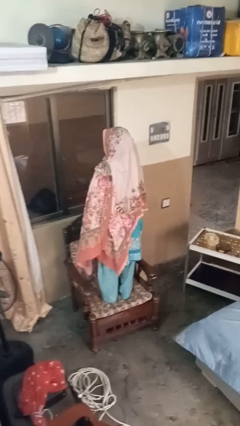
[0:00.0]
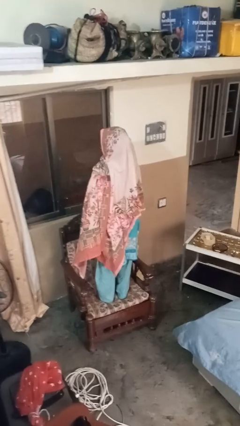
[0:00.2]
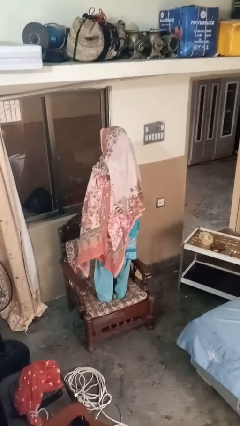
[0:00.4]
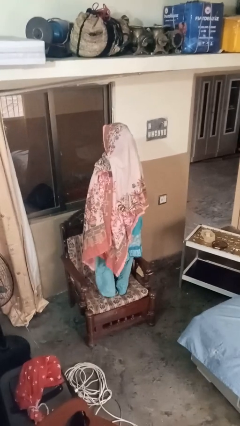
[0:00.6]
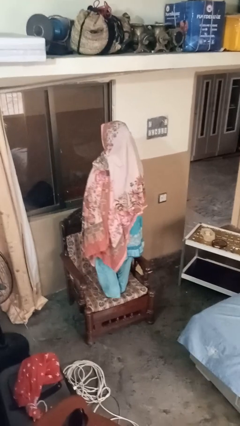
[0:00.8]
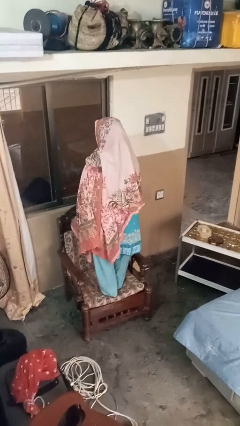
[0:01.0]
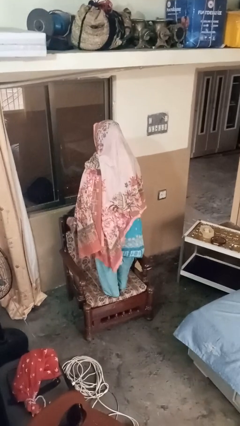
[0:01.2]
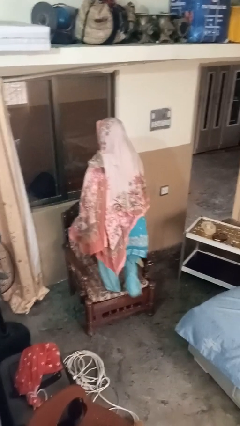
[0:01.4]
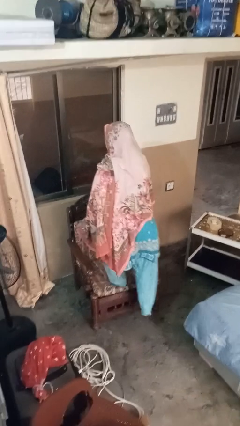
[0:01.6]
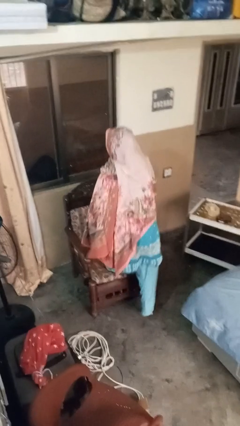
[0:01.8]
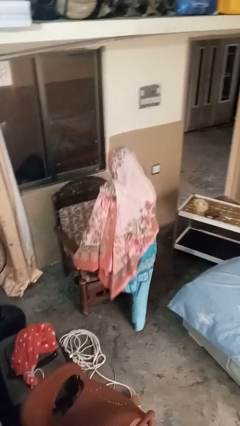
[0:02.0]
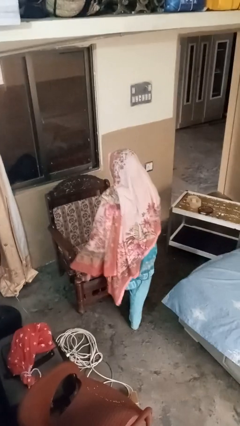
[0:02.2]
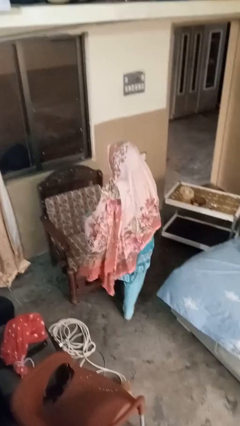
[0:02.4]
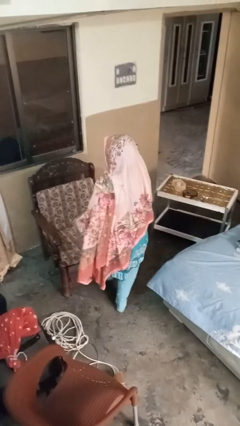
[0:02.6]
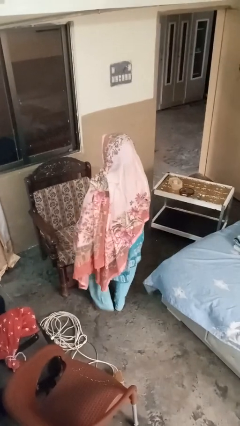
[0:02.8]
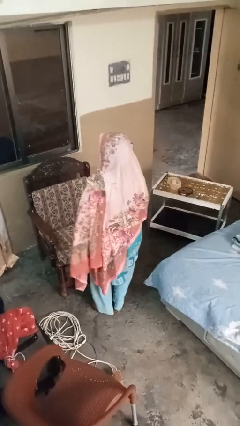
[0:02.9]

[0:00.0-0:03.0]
person climbs off couch

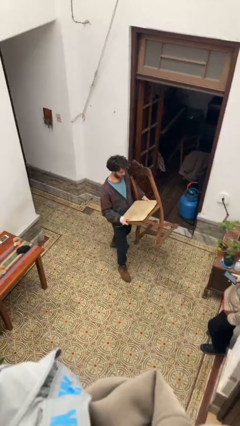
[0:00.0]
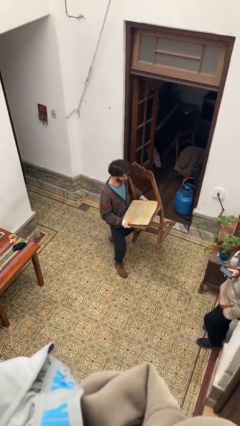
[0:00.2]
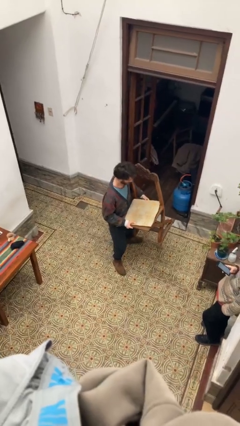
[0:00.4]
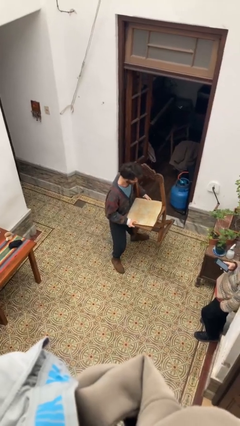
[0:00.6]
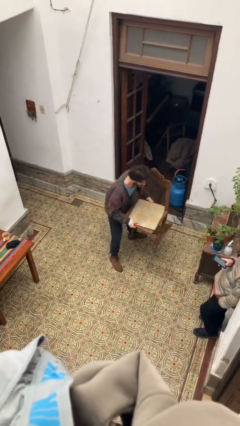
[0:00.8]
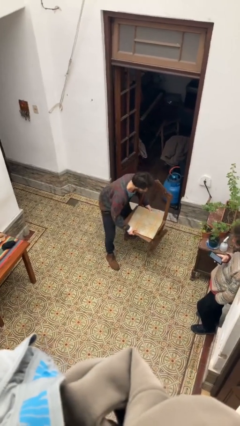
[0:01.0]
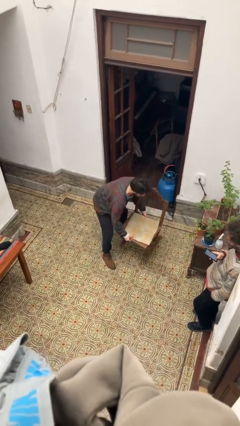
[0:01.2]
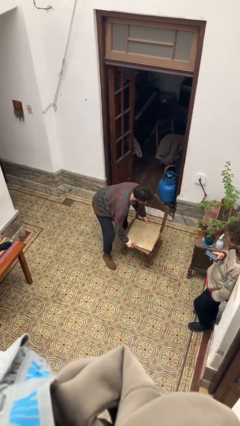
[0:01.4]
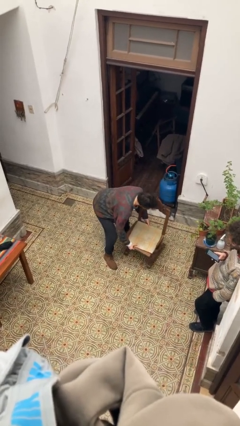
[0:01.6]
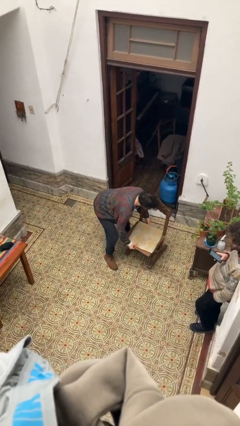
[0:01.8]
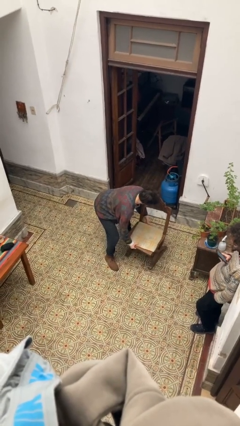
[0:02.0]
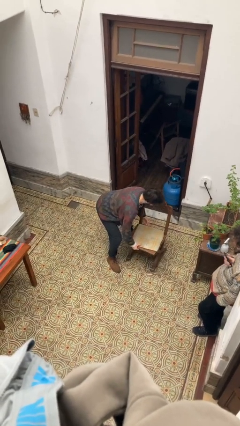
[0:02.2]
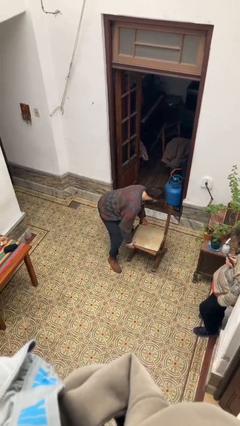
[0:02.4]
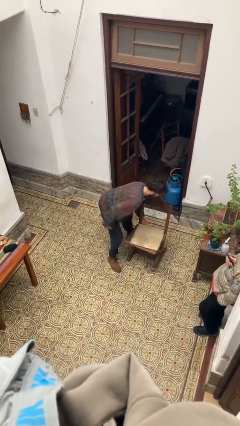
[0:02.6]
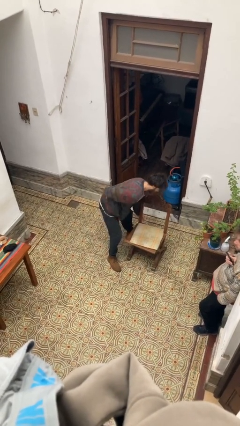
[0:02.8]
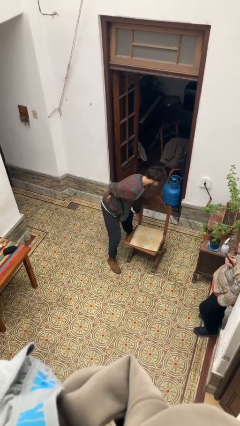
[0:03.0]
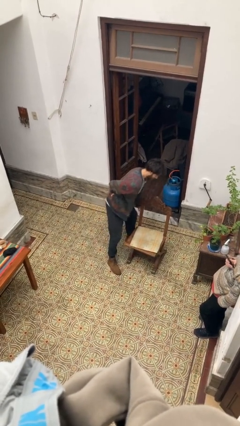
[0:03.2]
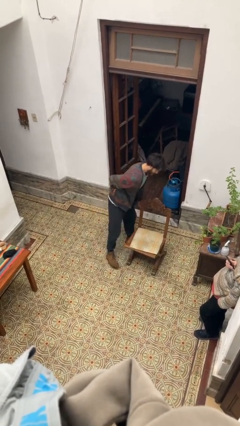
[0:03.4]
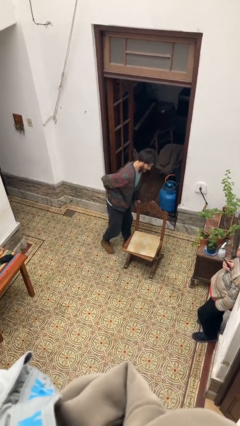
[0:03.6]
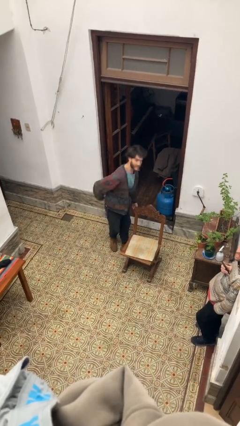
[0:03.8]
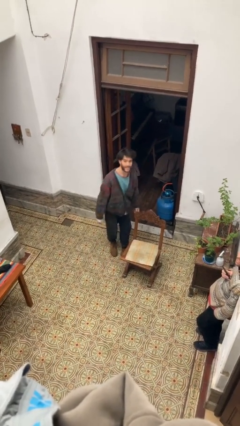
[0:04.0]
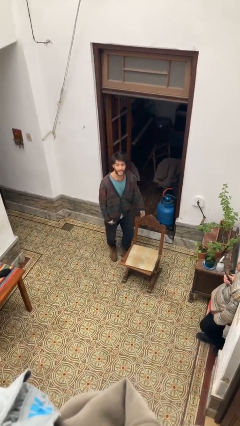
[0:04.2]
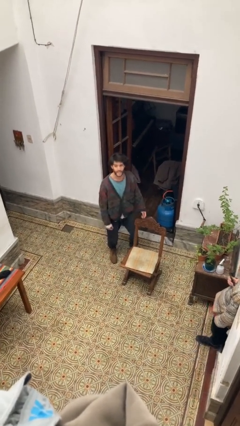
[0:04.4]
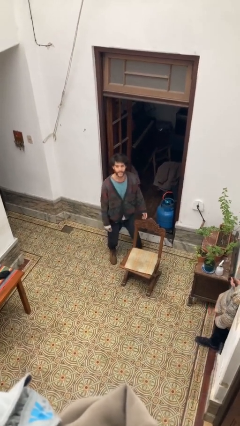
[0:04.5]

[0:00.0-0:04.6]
person puts down object on floor

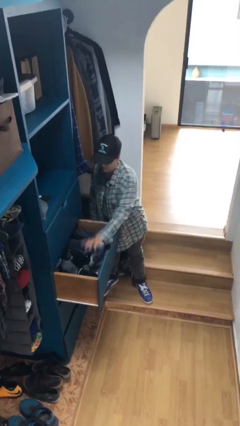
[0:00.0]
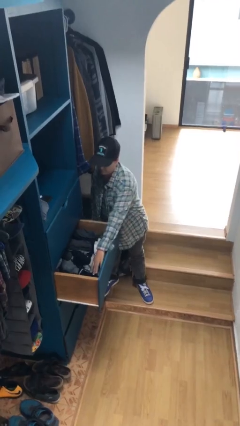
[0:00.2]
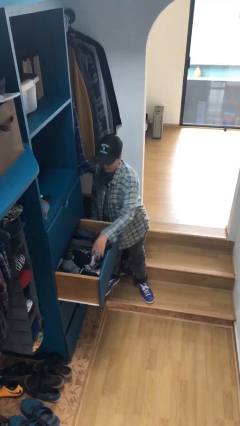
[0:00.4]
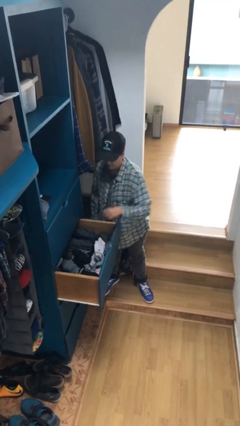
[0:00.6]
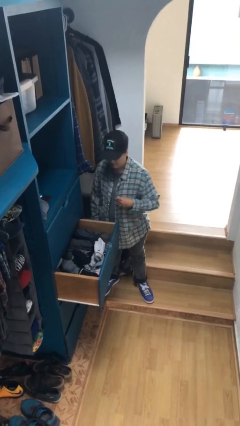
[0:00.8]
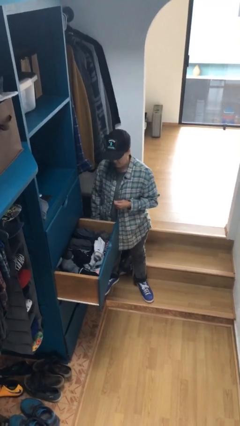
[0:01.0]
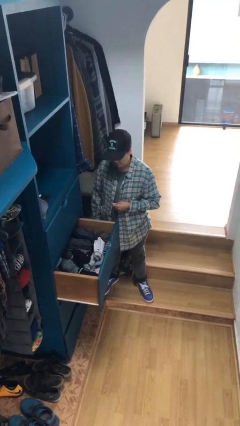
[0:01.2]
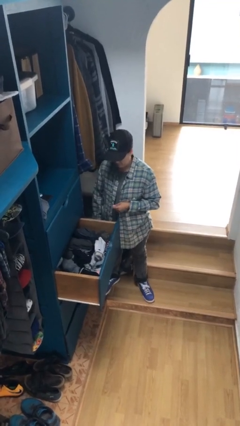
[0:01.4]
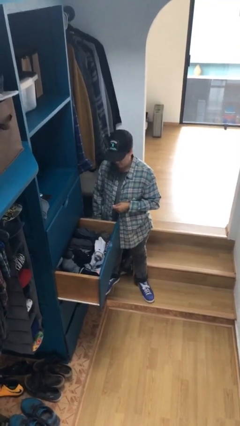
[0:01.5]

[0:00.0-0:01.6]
person puts clothes into dresser

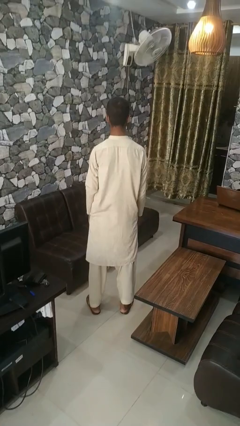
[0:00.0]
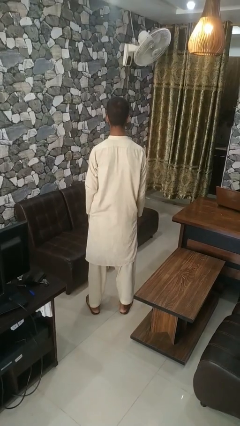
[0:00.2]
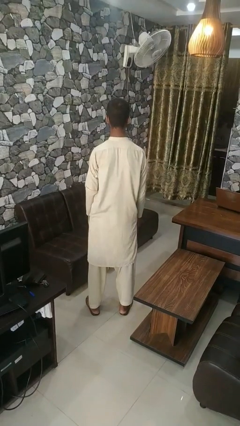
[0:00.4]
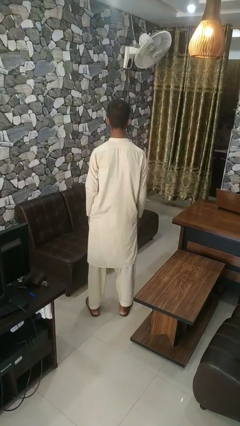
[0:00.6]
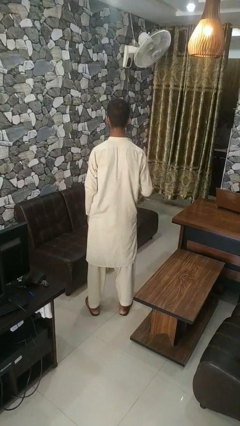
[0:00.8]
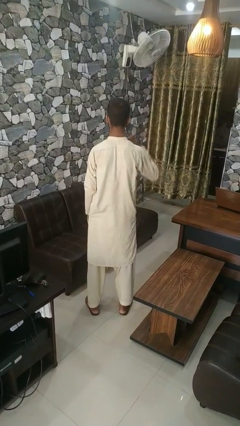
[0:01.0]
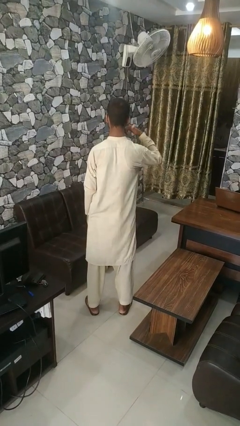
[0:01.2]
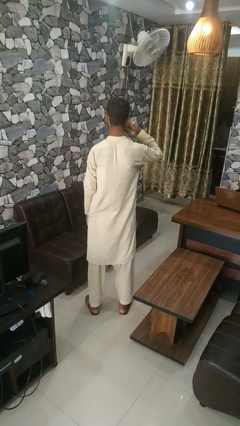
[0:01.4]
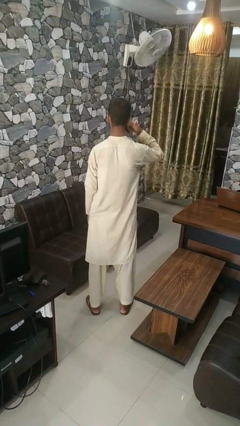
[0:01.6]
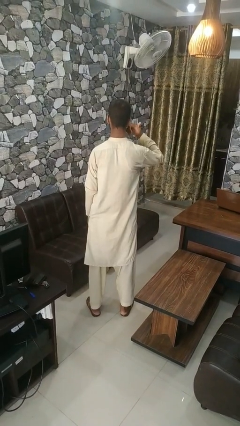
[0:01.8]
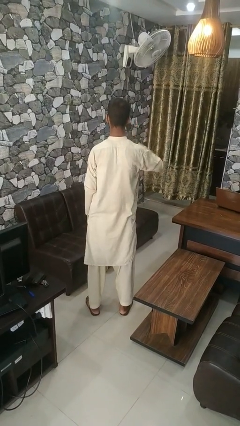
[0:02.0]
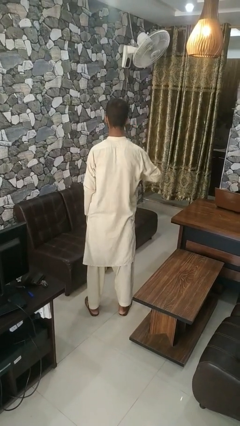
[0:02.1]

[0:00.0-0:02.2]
person gestures call me

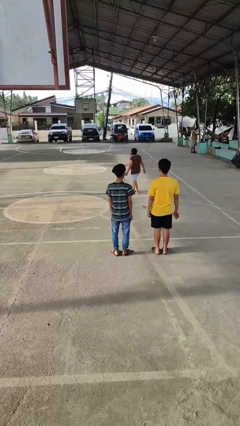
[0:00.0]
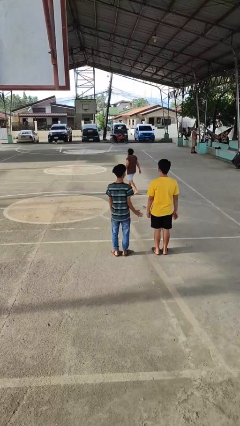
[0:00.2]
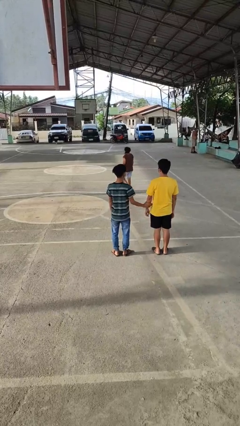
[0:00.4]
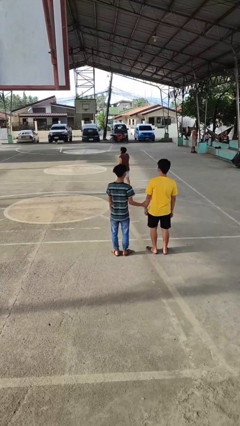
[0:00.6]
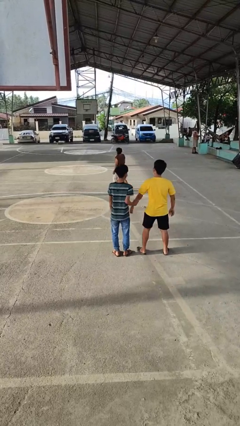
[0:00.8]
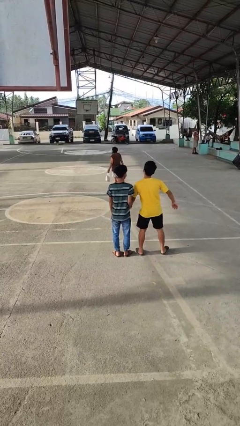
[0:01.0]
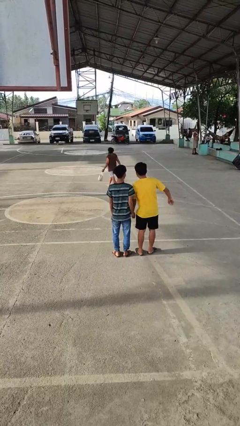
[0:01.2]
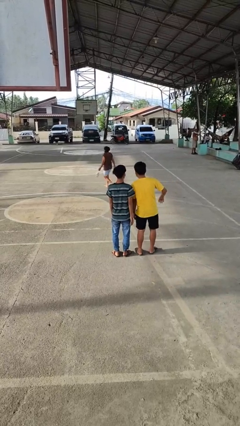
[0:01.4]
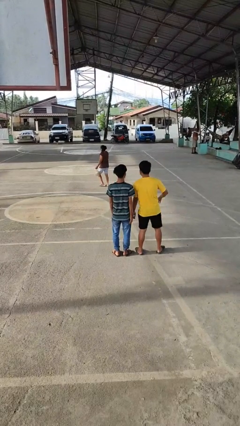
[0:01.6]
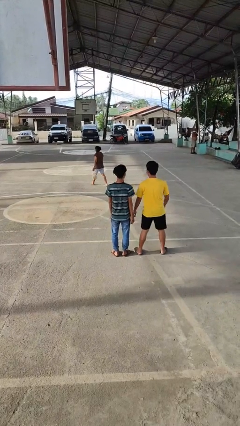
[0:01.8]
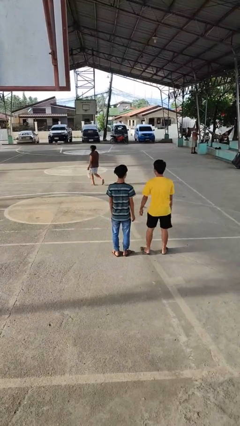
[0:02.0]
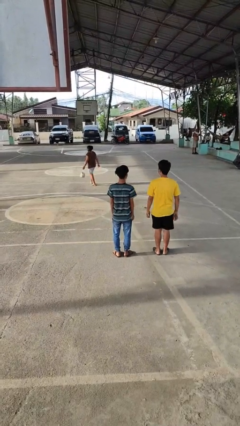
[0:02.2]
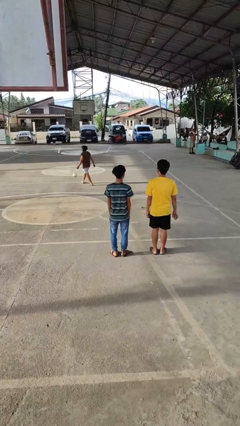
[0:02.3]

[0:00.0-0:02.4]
person grabs person by forearm

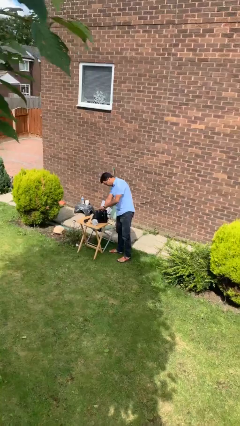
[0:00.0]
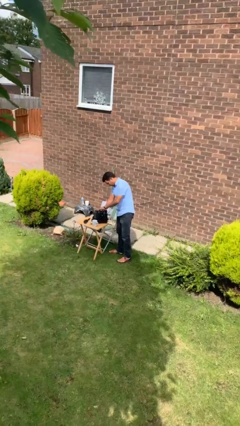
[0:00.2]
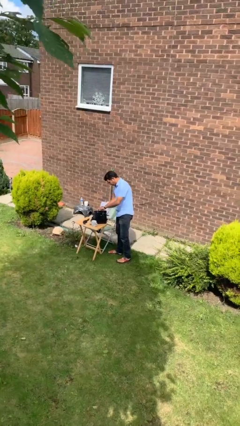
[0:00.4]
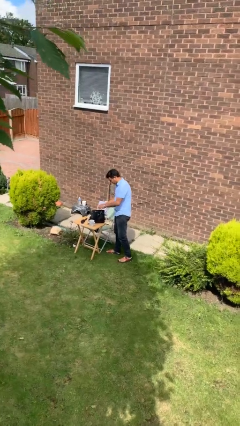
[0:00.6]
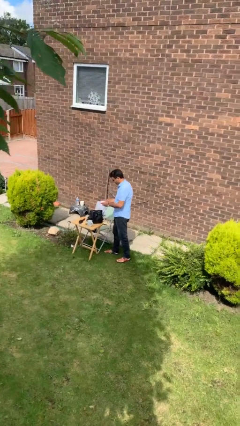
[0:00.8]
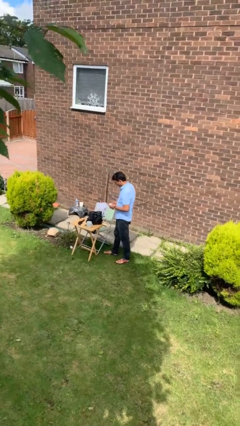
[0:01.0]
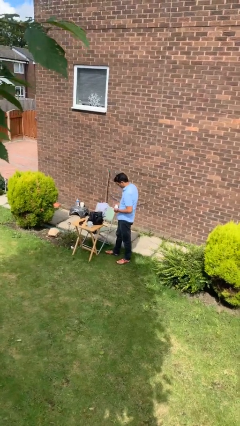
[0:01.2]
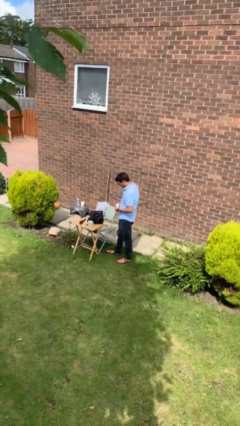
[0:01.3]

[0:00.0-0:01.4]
person takes object from backpack

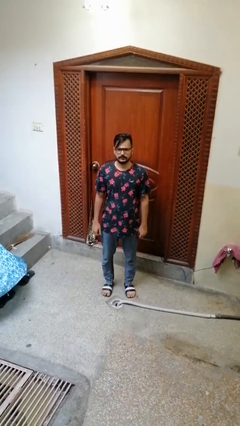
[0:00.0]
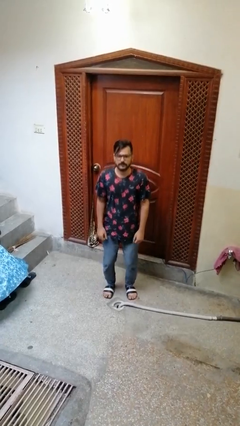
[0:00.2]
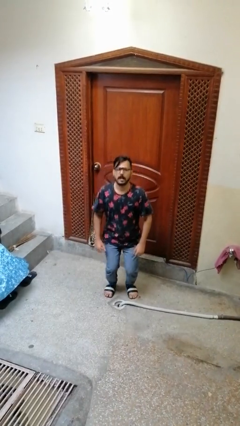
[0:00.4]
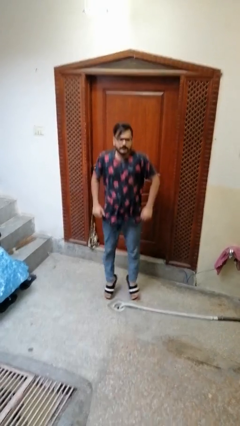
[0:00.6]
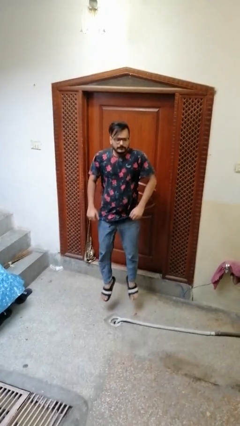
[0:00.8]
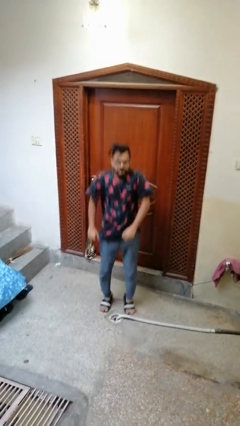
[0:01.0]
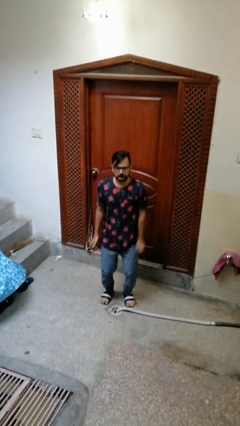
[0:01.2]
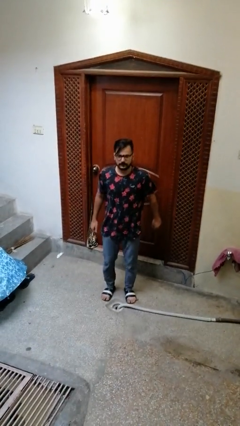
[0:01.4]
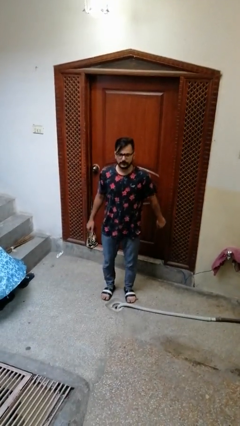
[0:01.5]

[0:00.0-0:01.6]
person jumps
